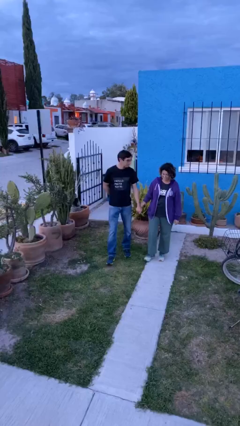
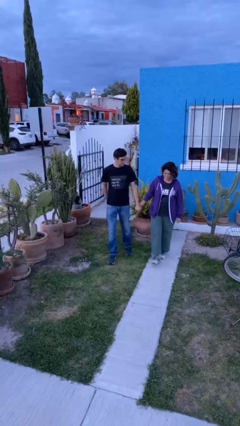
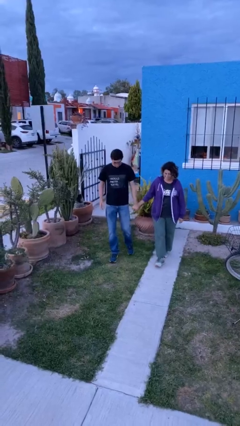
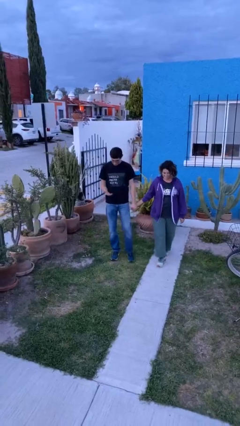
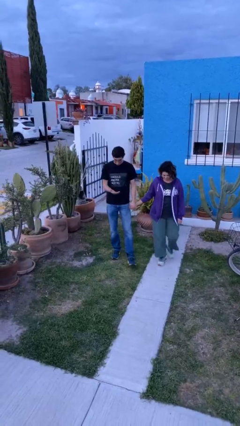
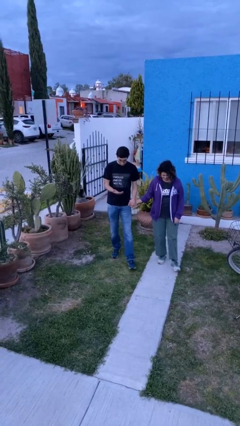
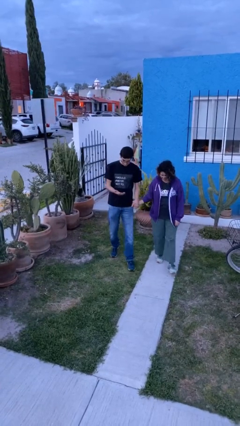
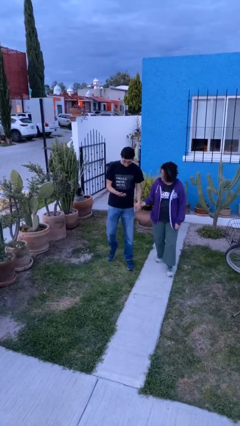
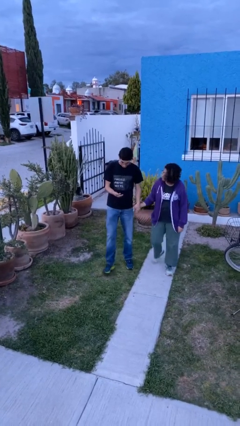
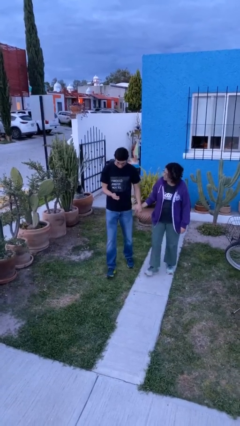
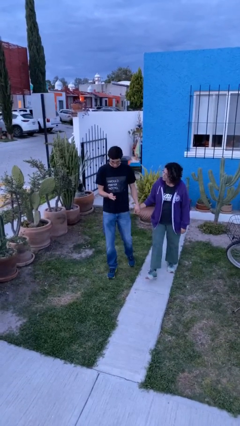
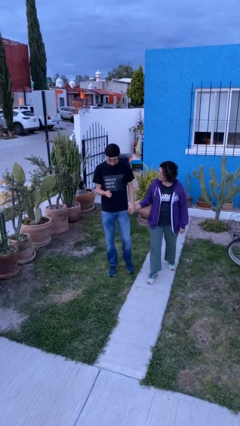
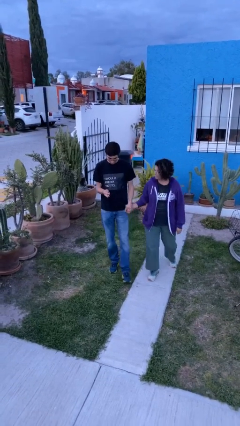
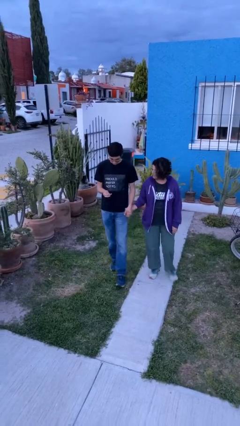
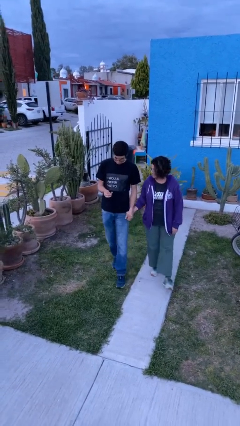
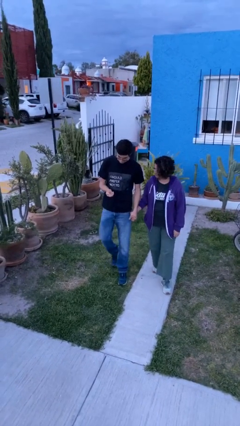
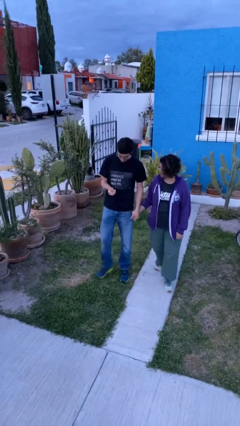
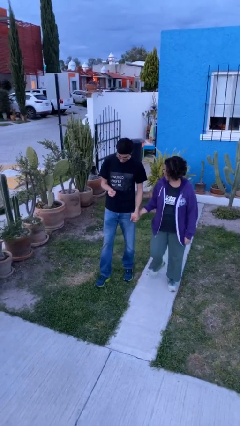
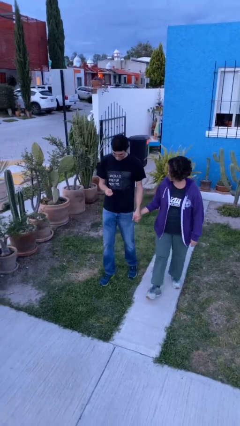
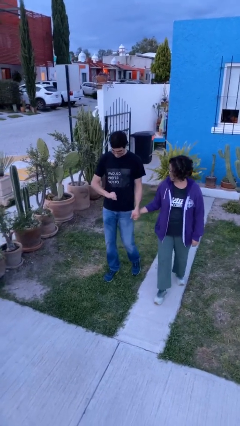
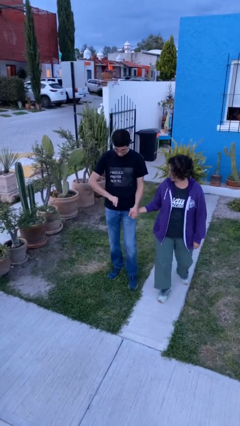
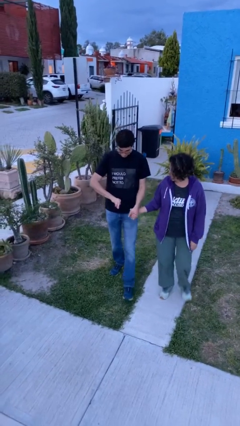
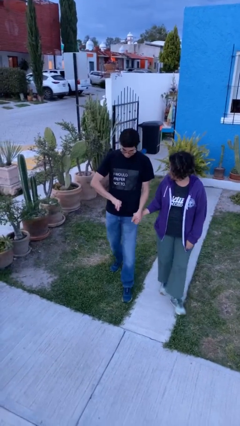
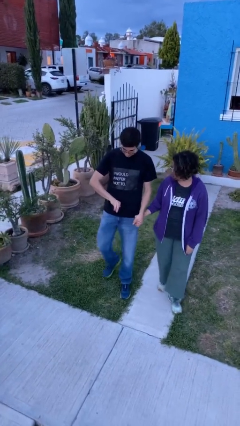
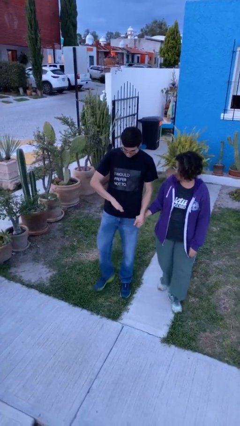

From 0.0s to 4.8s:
person holds hand

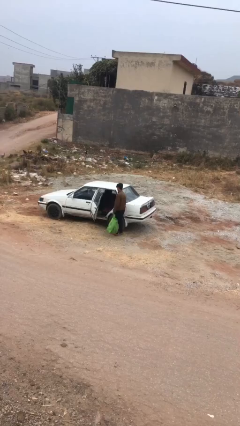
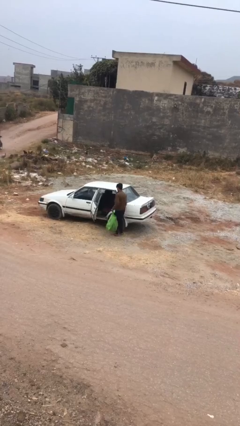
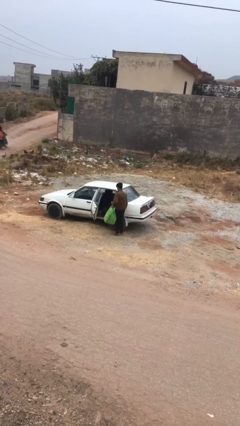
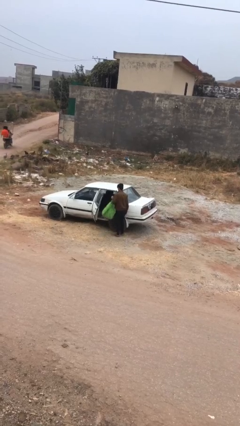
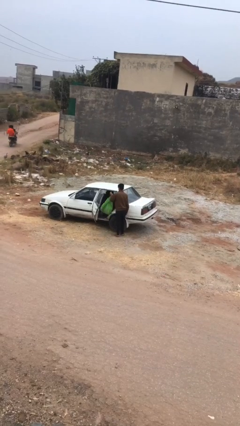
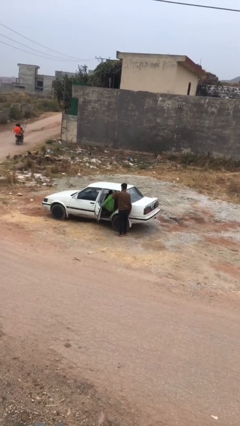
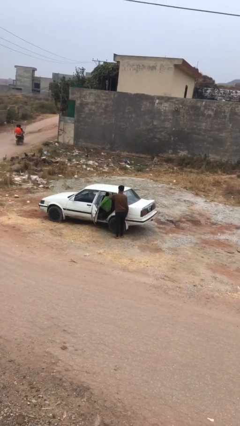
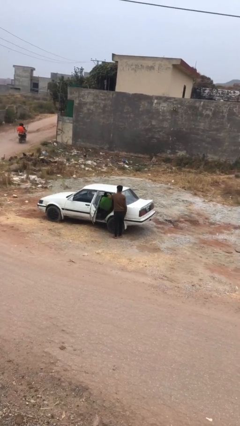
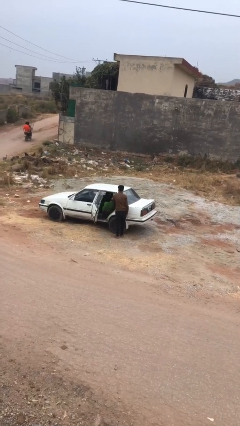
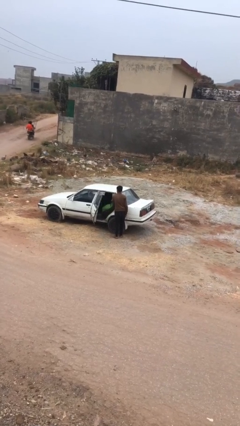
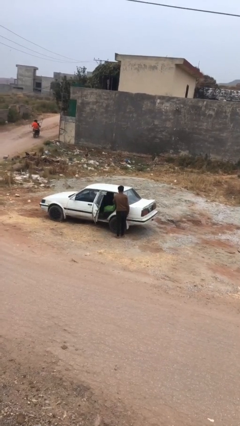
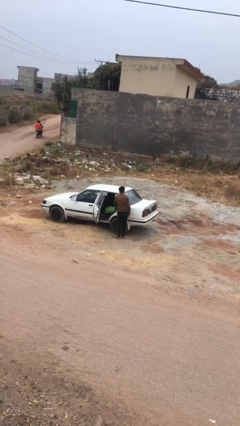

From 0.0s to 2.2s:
person loads car

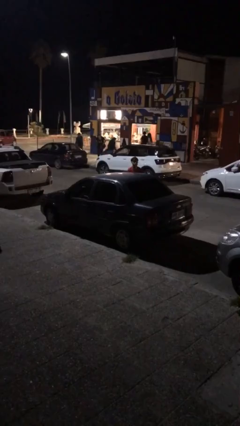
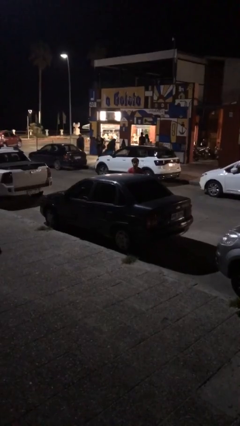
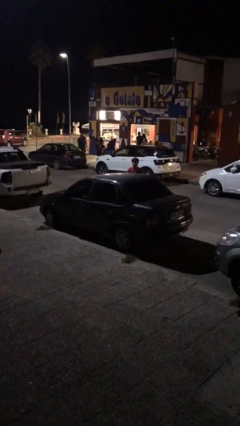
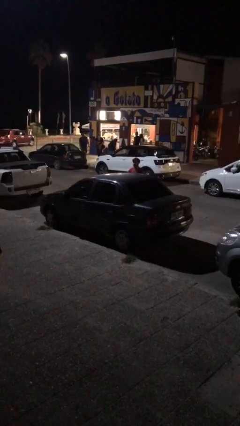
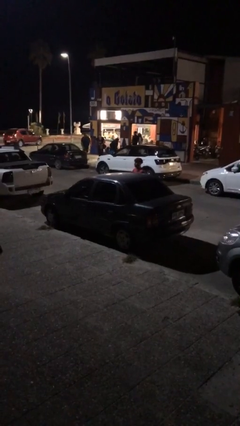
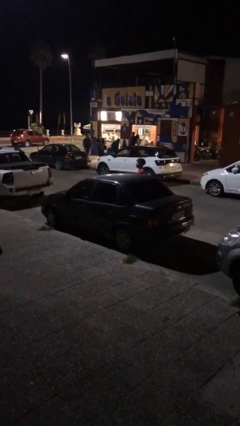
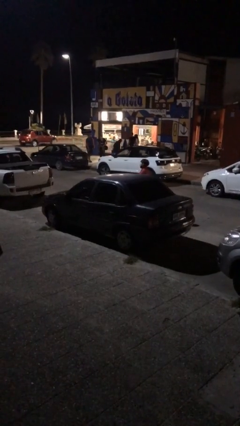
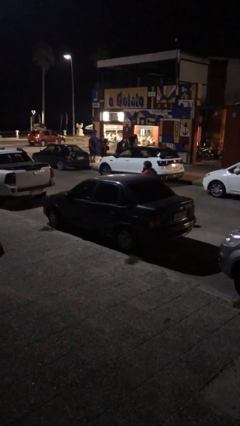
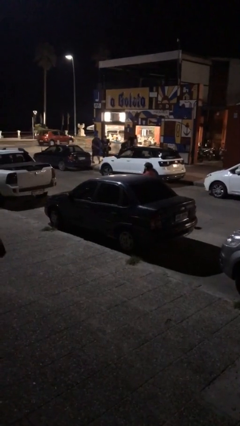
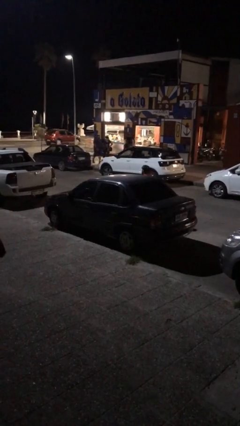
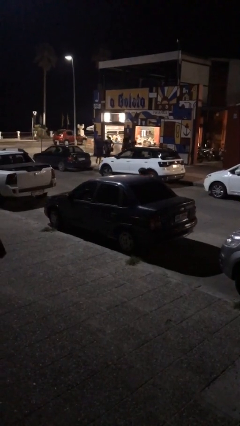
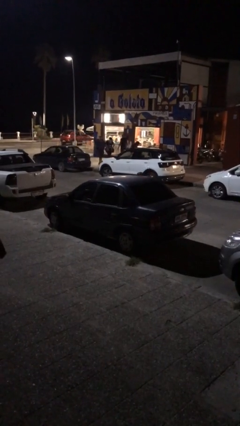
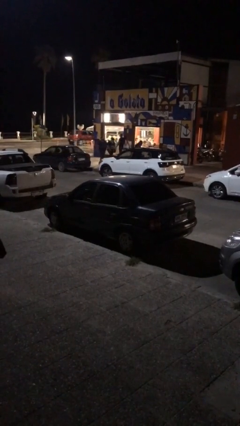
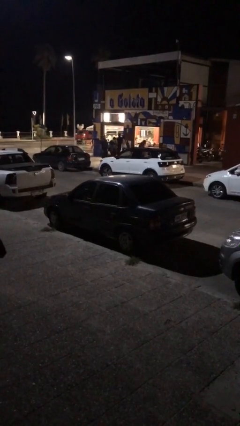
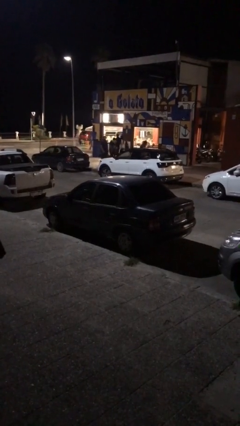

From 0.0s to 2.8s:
car picks up person

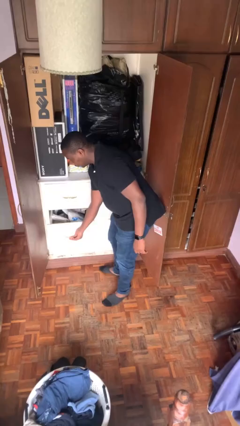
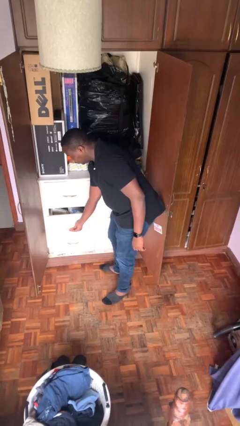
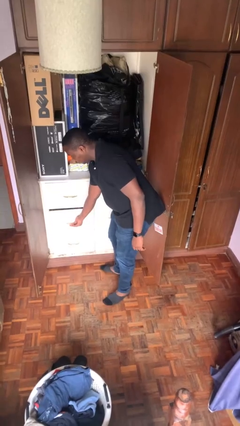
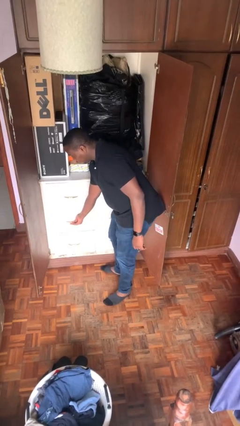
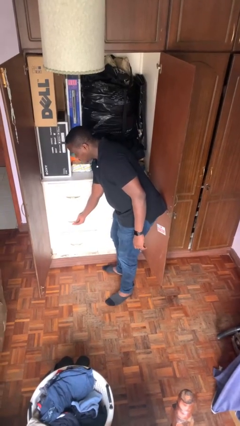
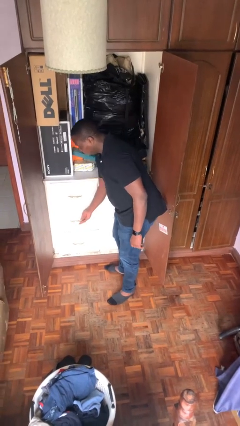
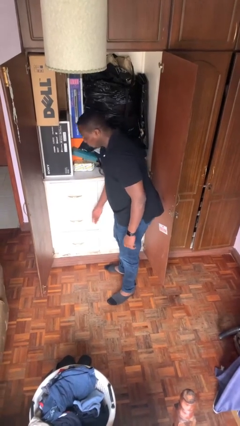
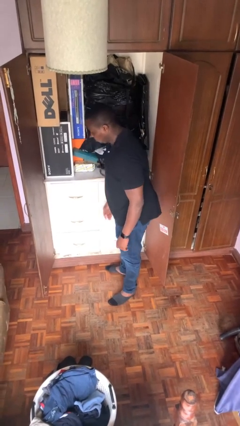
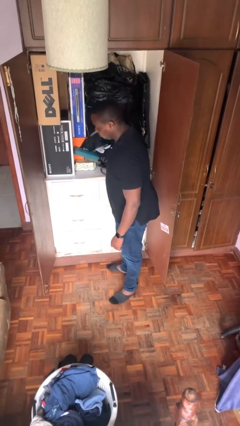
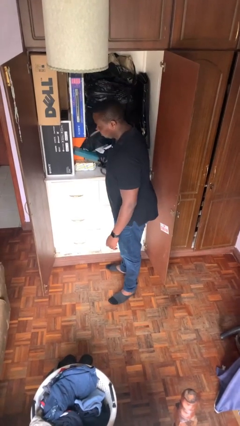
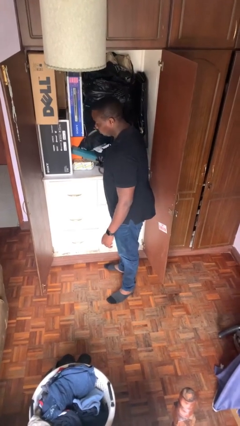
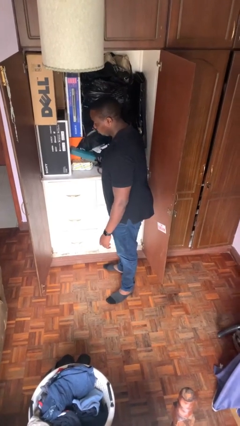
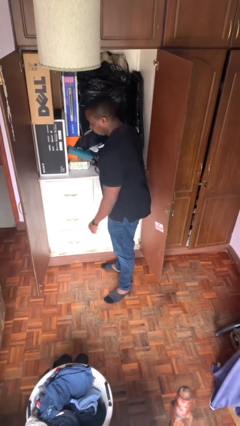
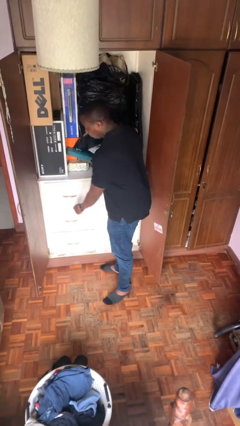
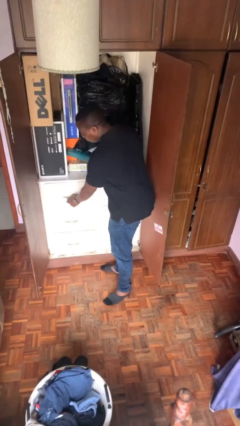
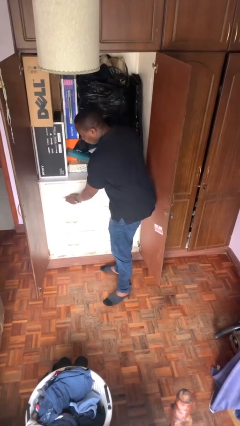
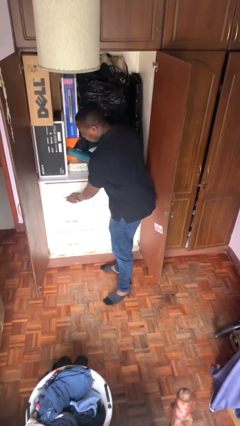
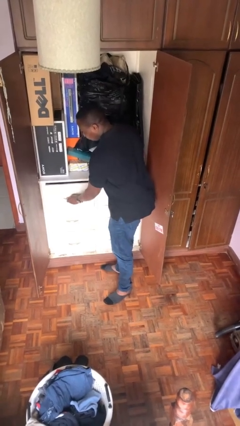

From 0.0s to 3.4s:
person closes dresser drawer

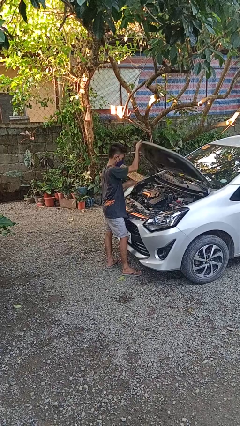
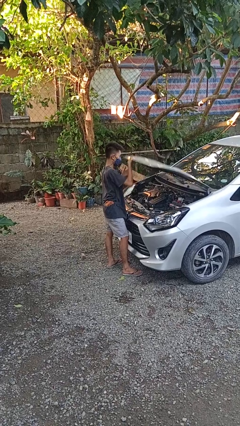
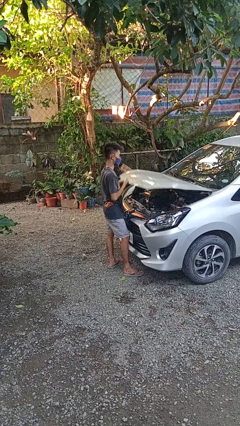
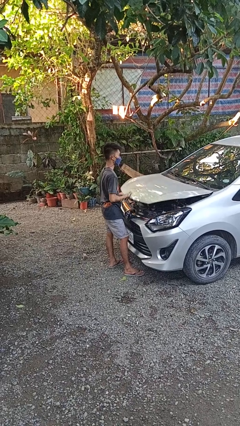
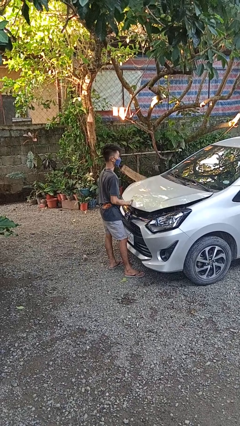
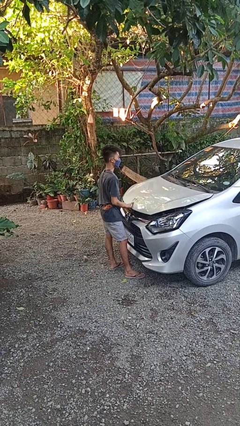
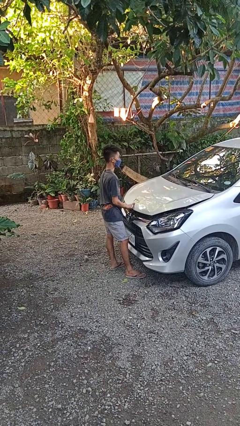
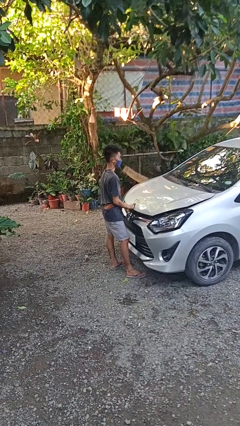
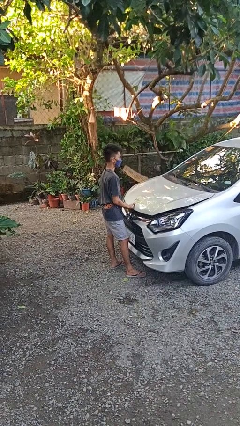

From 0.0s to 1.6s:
person closes car hood

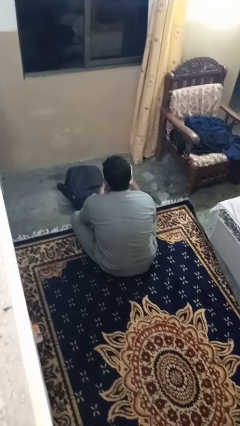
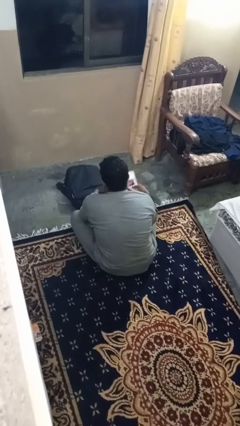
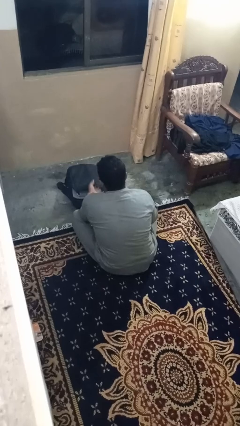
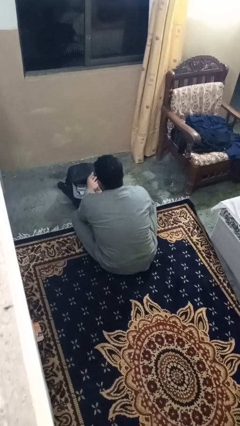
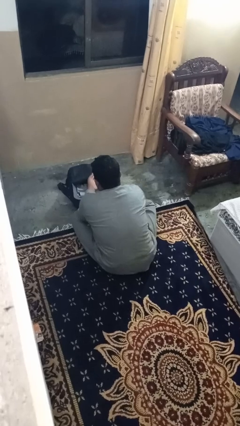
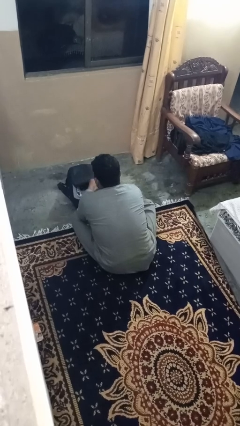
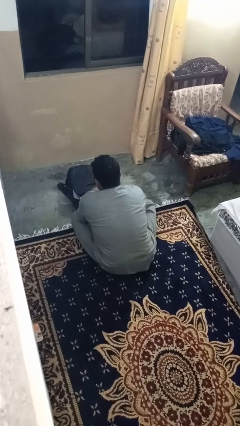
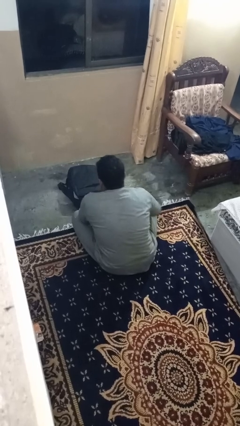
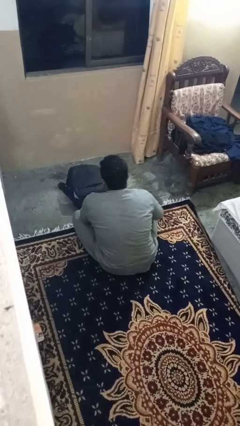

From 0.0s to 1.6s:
person puts object into bag

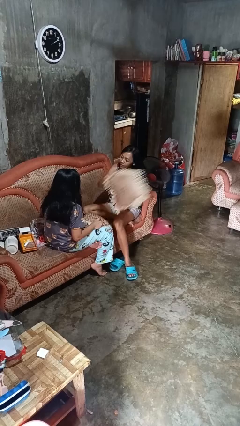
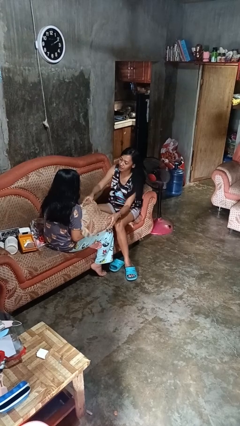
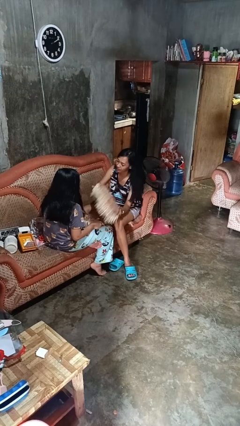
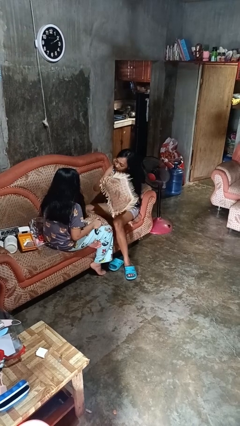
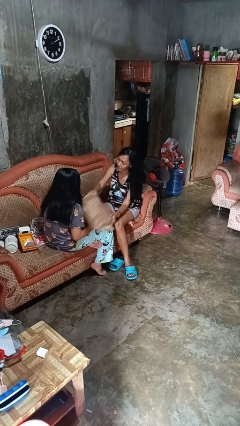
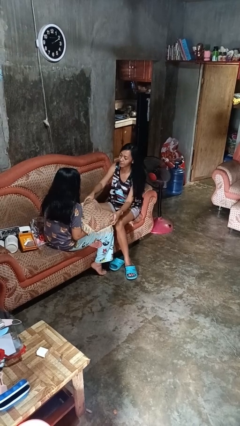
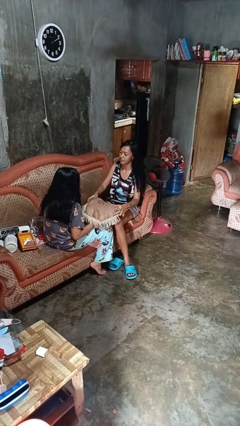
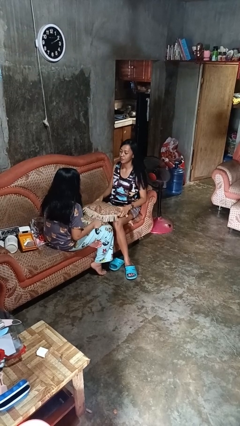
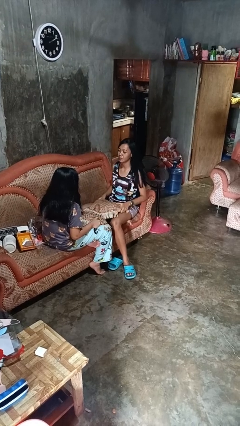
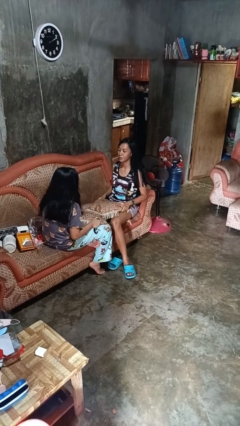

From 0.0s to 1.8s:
person hits person with pillow
